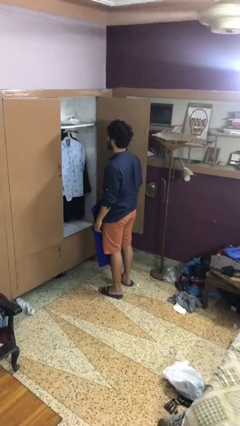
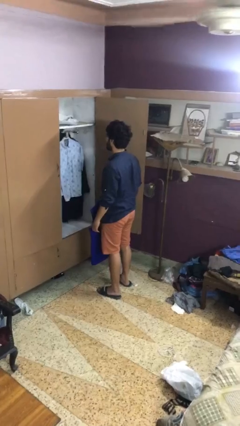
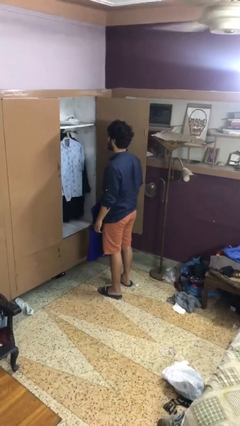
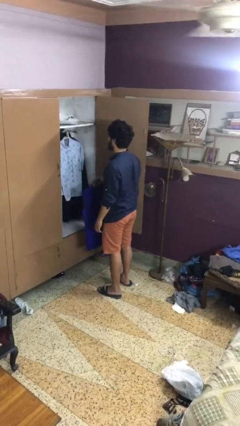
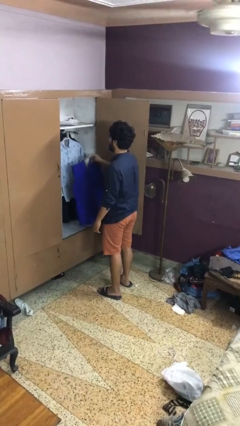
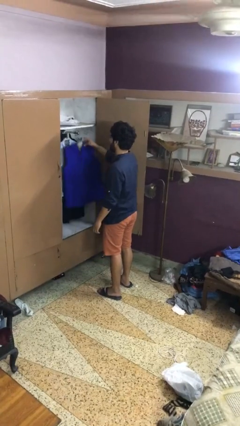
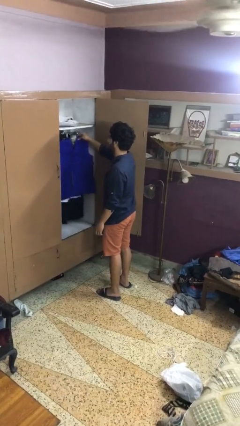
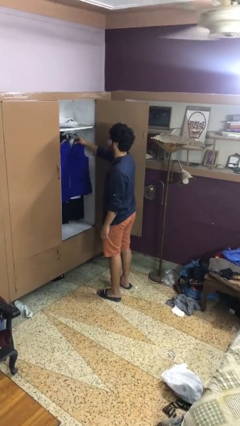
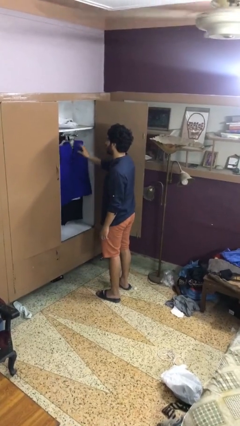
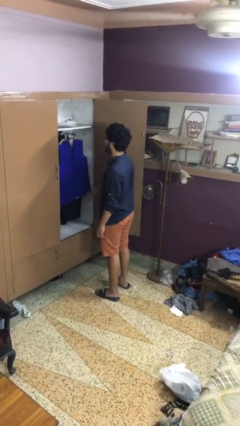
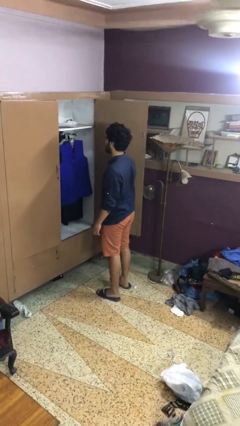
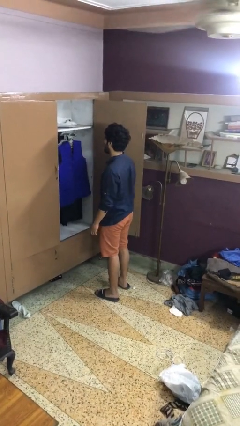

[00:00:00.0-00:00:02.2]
person puts clothes into closet

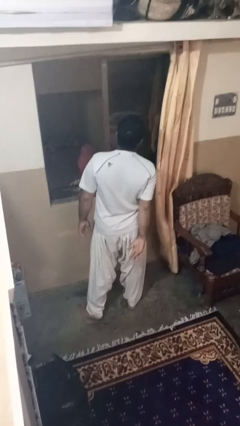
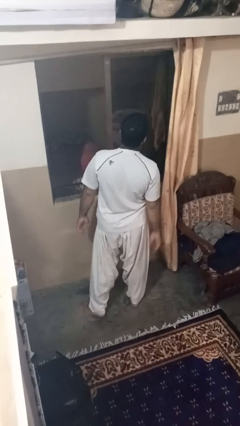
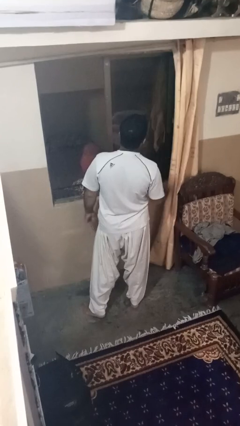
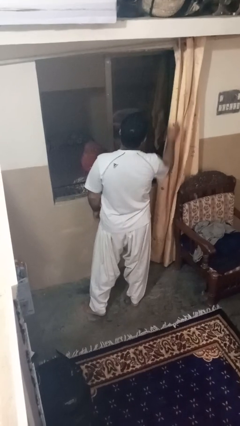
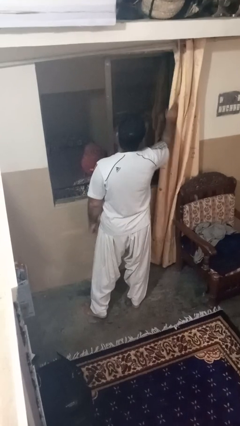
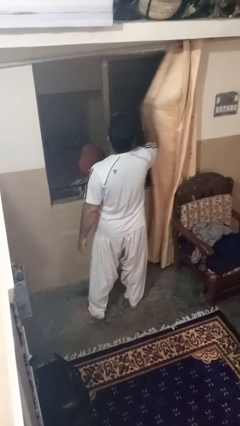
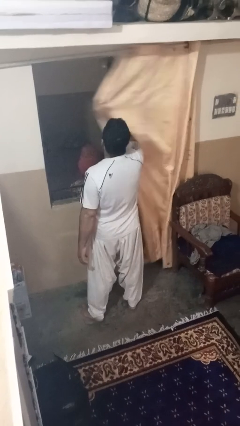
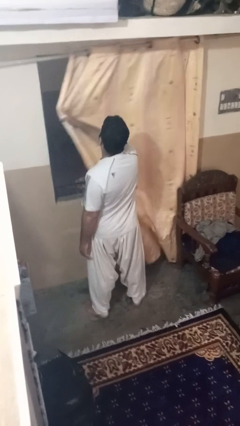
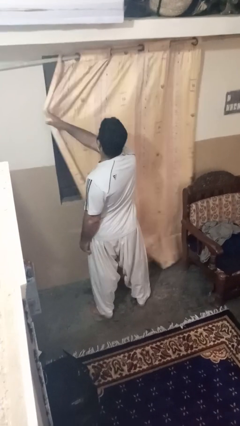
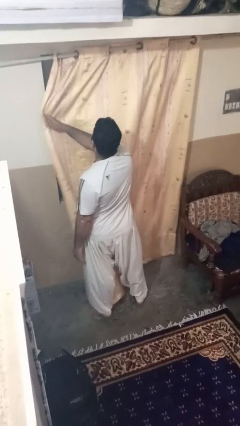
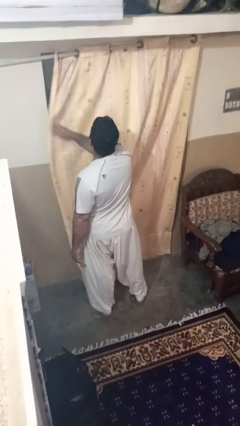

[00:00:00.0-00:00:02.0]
person closes curtains

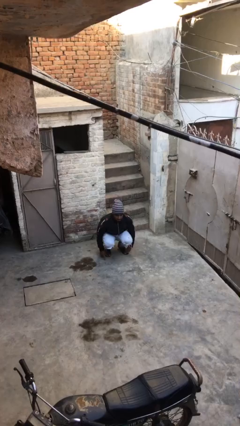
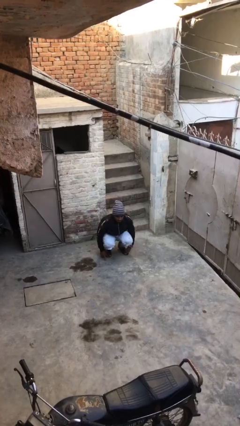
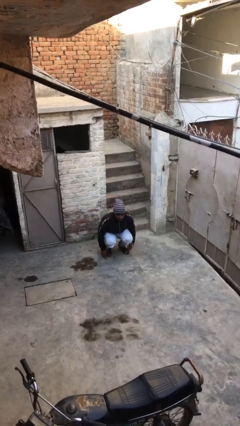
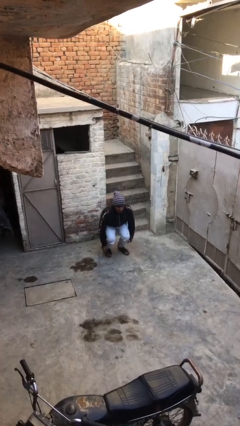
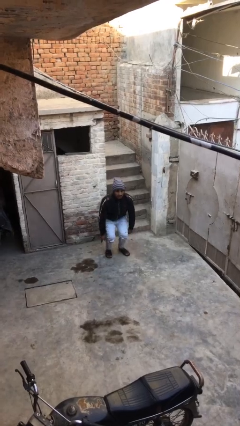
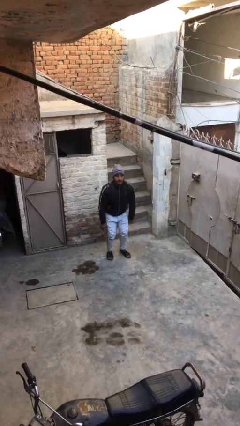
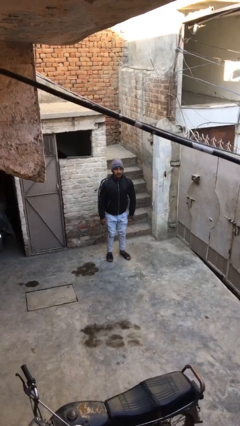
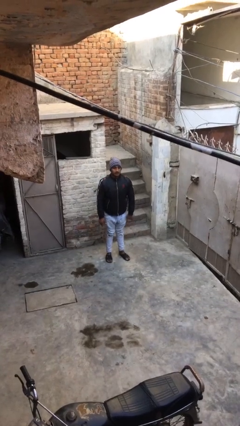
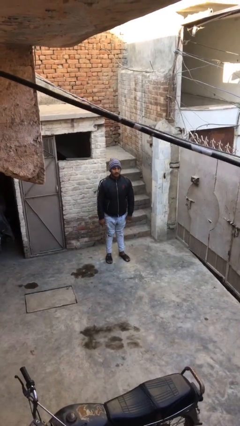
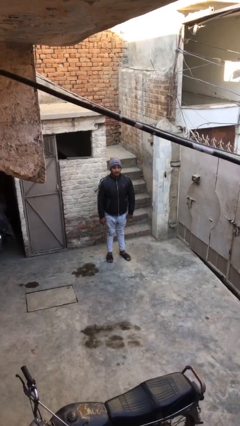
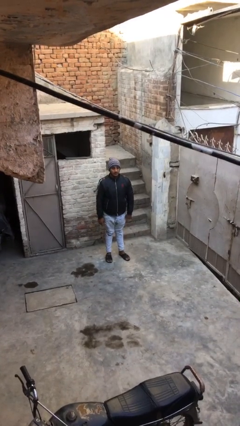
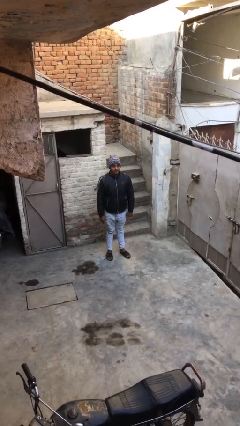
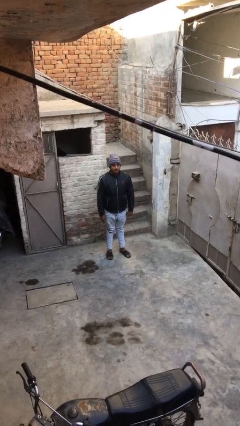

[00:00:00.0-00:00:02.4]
person stands up

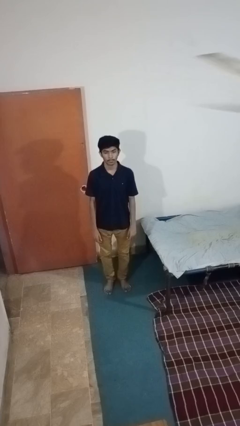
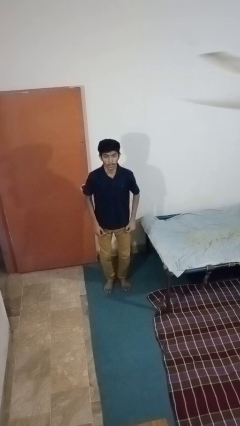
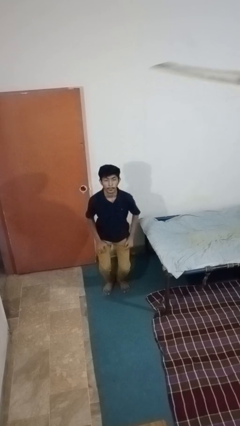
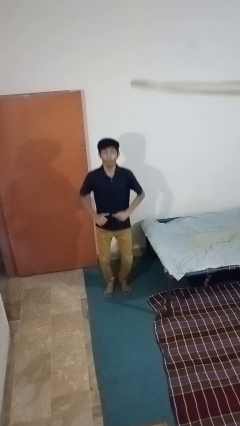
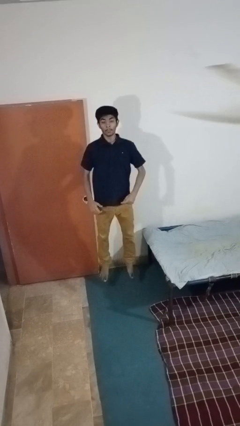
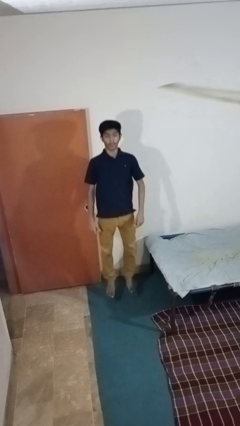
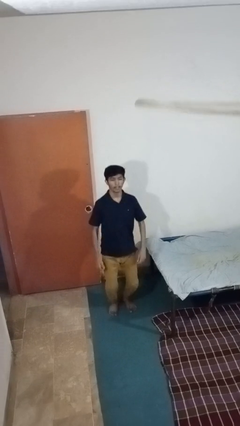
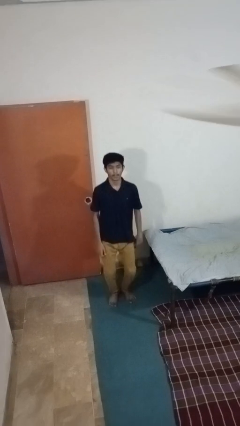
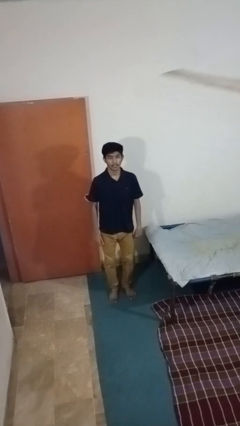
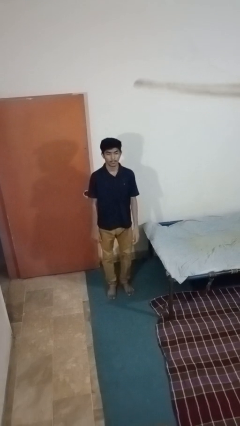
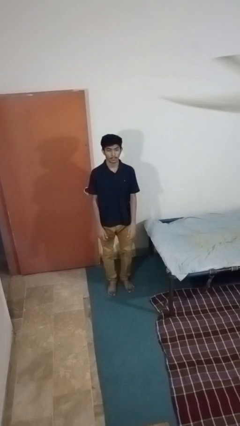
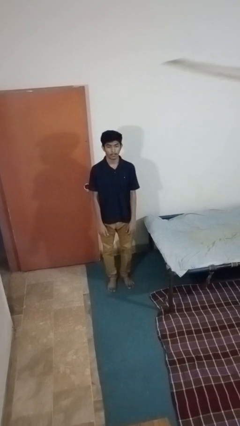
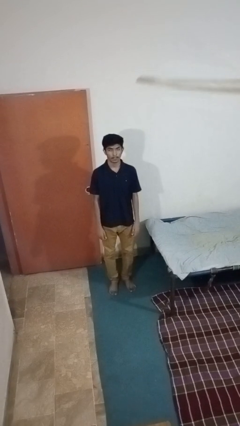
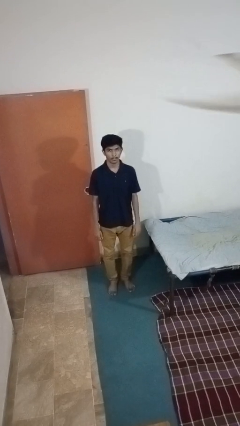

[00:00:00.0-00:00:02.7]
person jumps

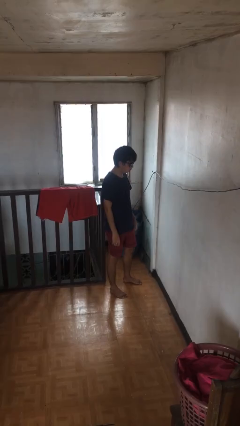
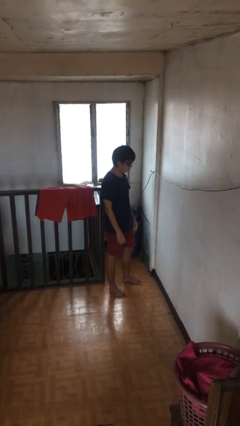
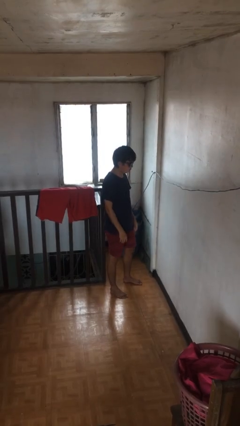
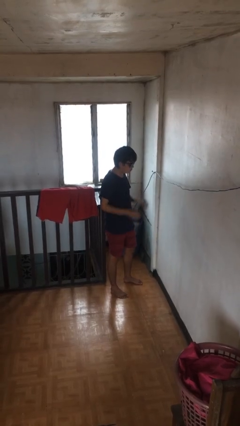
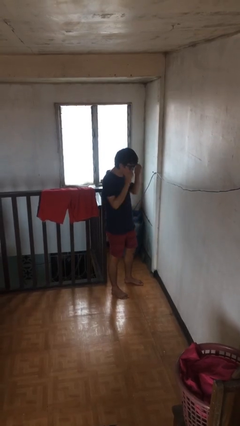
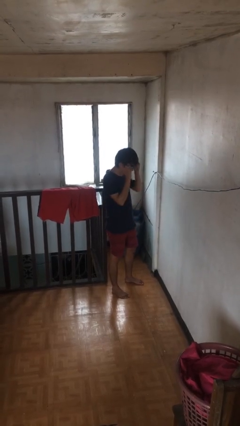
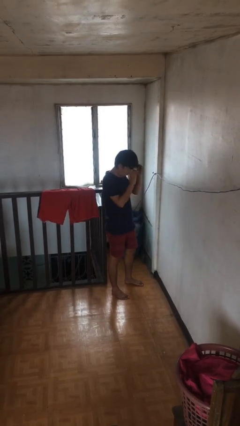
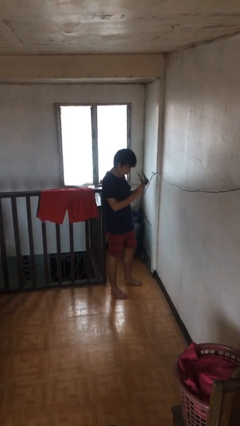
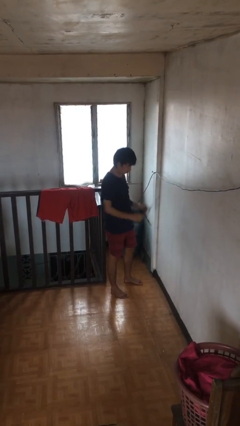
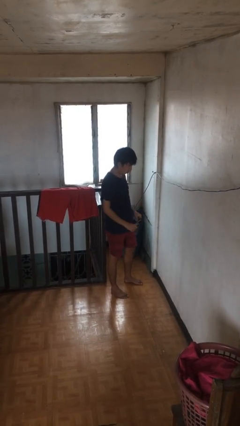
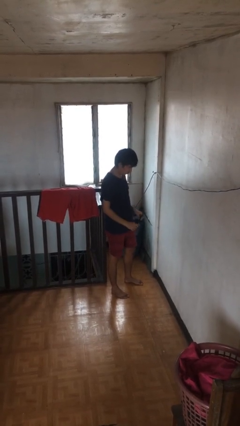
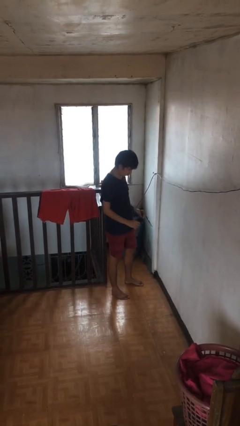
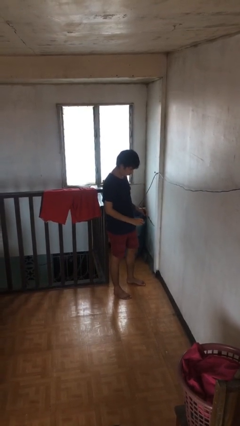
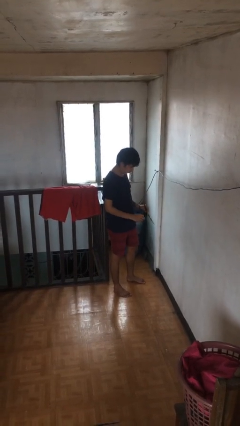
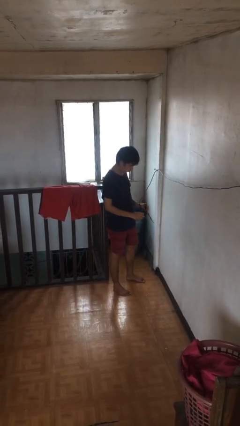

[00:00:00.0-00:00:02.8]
person takes off sunglasses

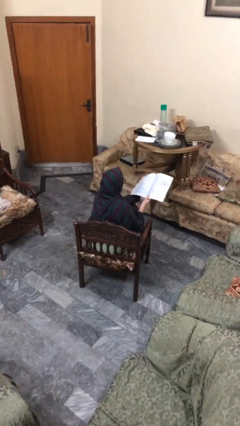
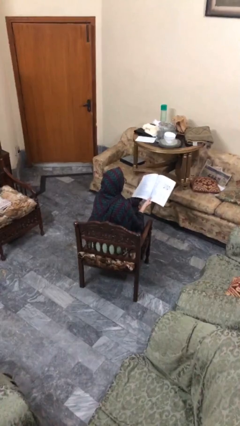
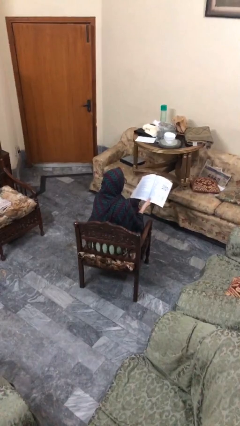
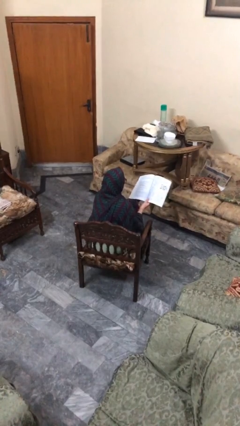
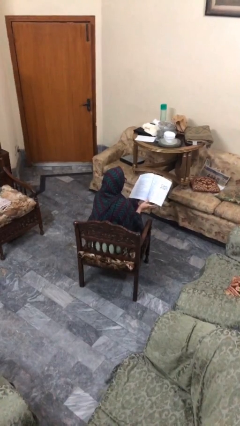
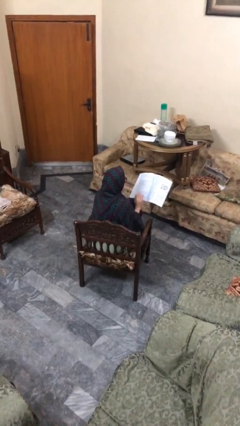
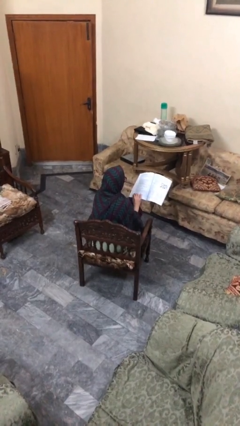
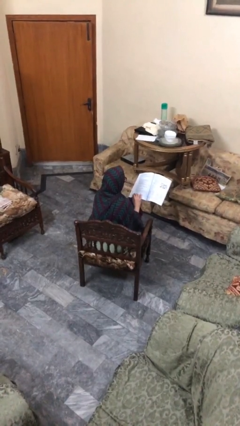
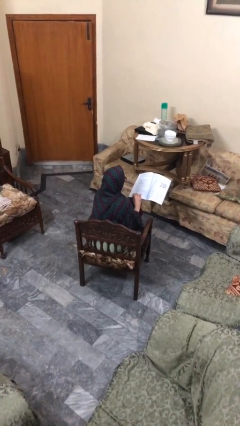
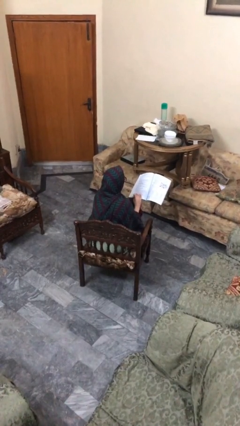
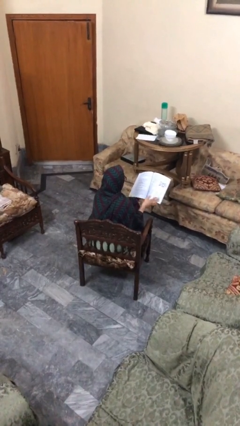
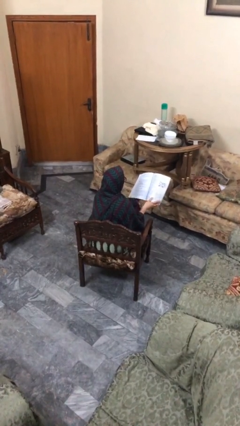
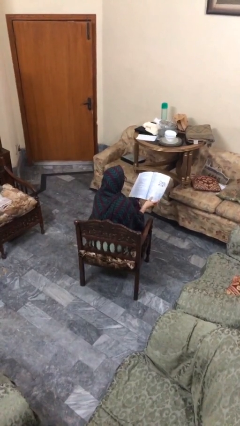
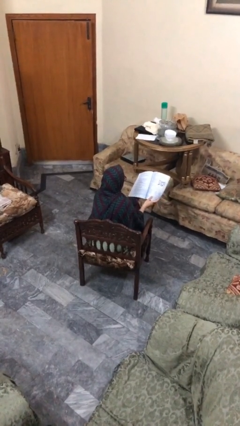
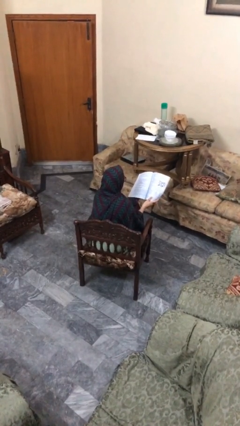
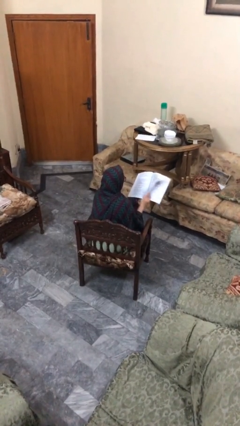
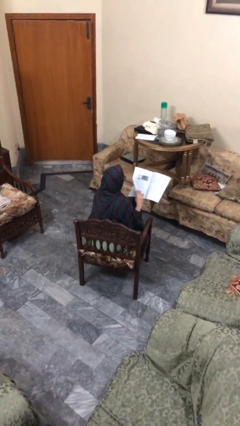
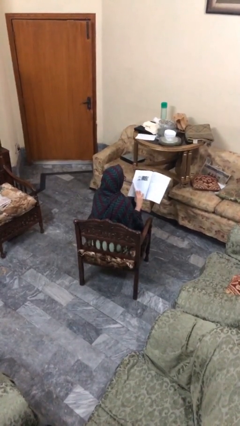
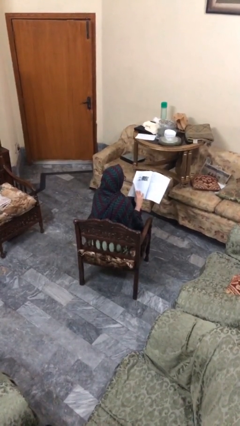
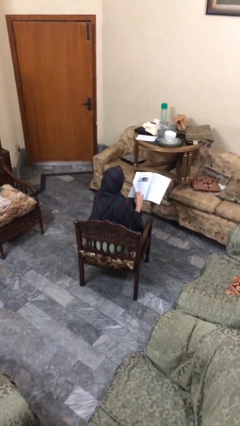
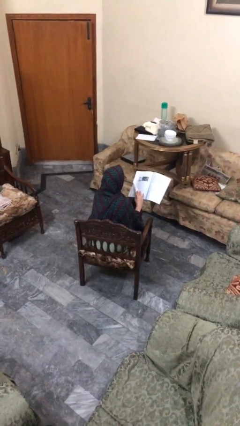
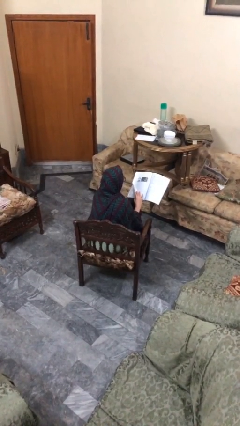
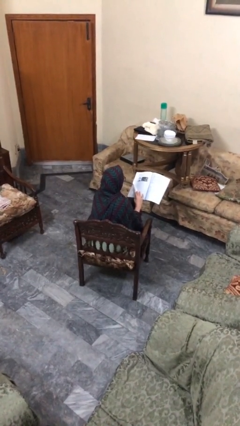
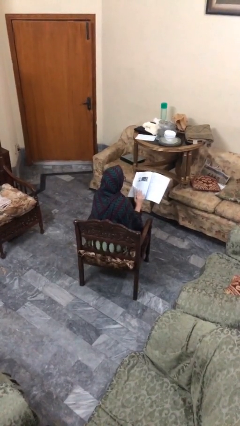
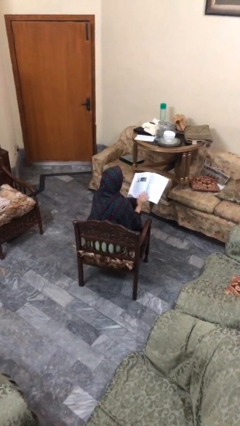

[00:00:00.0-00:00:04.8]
person reads book

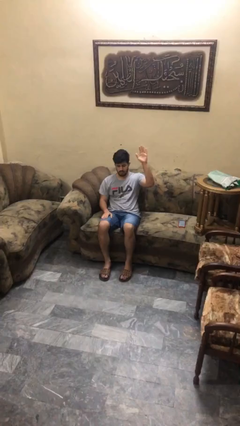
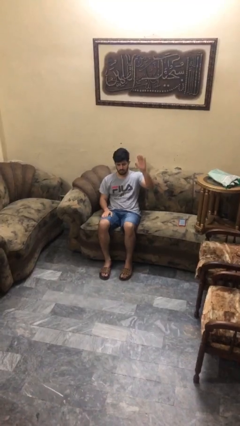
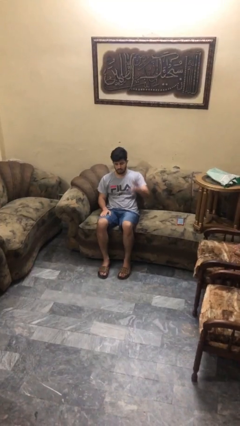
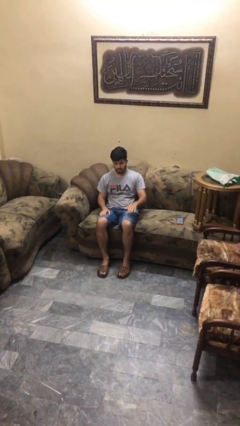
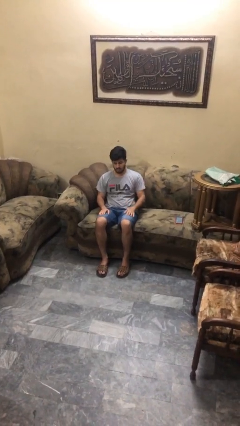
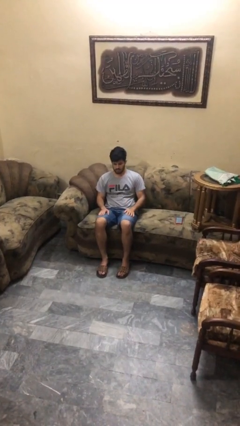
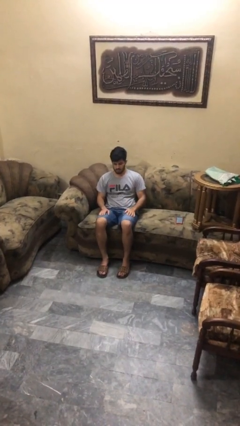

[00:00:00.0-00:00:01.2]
person gestures lower hand
